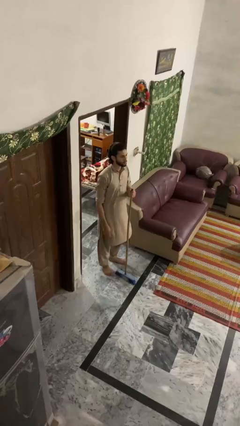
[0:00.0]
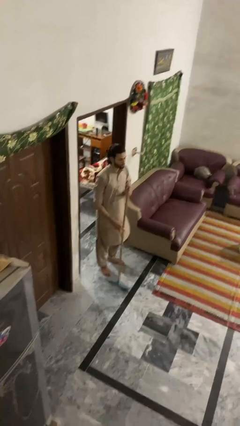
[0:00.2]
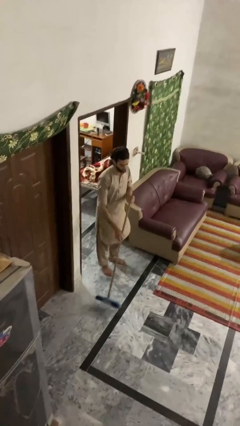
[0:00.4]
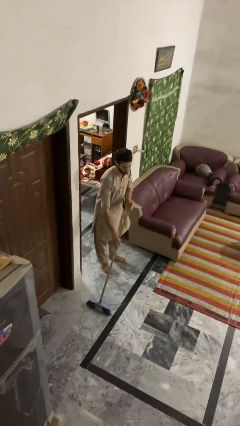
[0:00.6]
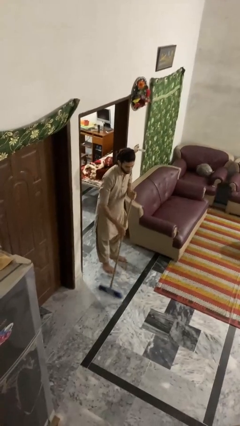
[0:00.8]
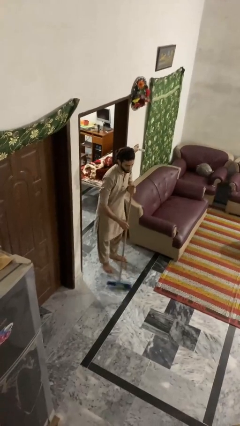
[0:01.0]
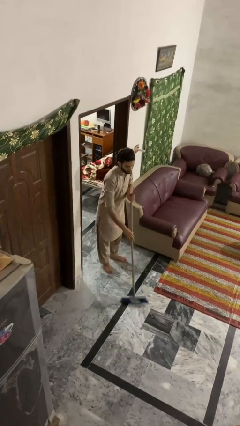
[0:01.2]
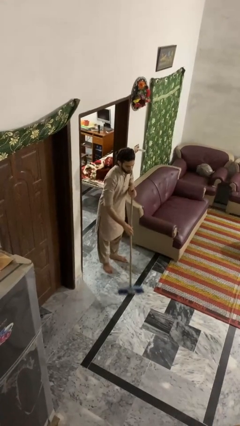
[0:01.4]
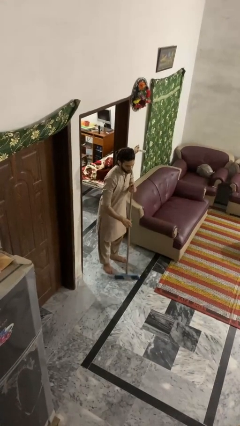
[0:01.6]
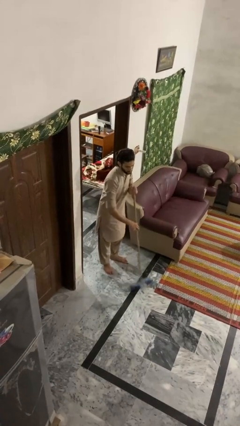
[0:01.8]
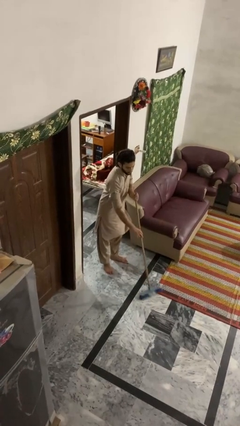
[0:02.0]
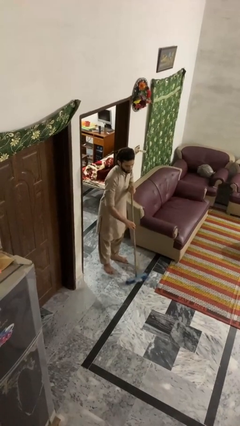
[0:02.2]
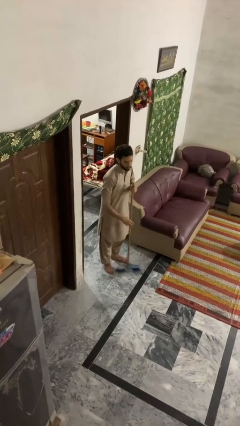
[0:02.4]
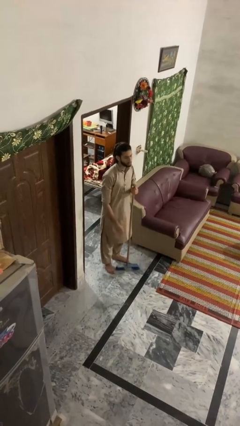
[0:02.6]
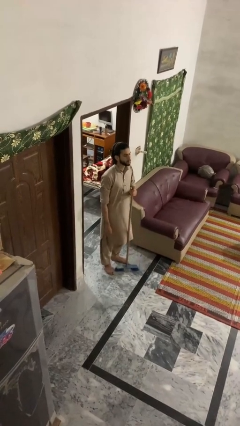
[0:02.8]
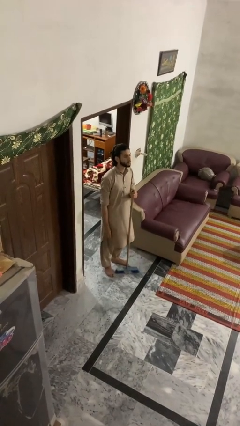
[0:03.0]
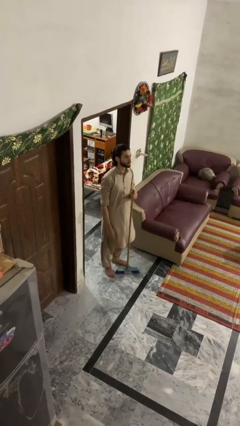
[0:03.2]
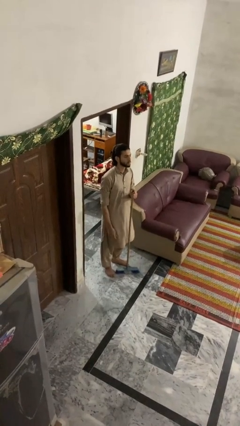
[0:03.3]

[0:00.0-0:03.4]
person sweeps floor

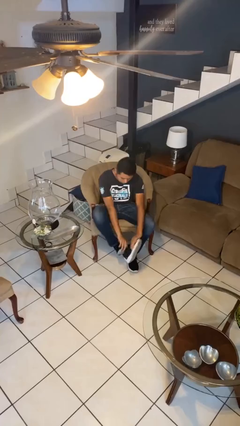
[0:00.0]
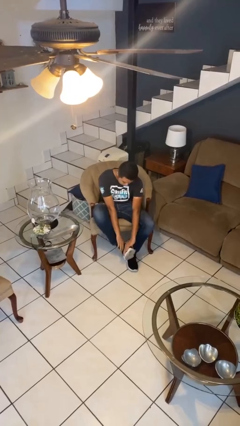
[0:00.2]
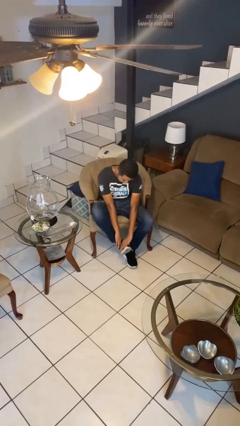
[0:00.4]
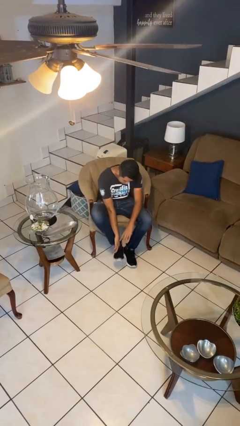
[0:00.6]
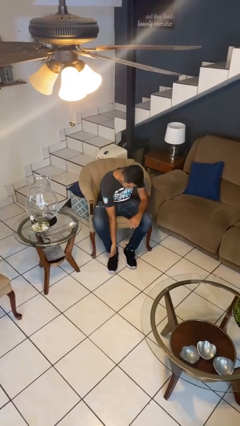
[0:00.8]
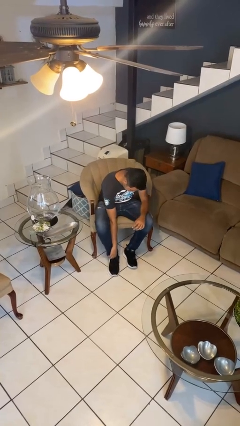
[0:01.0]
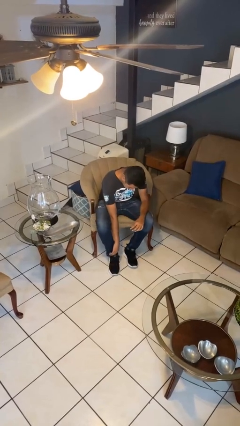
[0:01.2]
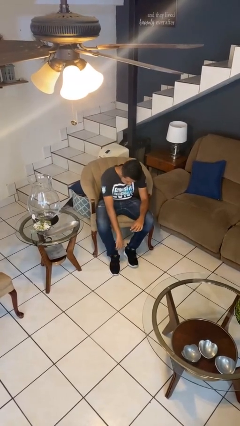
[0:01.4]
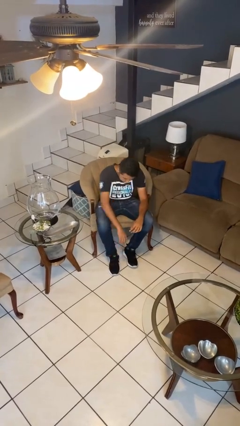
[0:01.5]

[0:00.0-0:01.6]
person puts on headphones

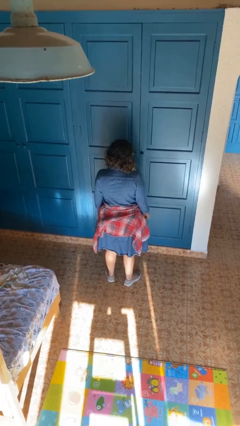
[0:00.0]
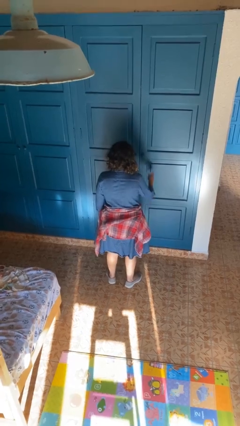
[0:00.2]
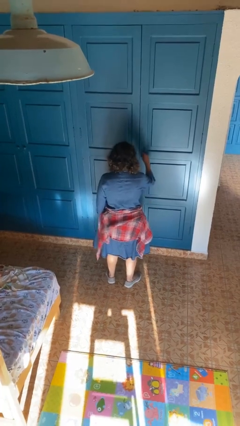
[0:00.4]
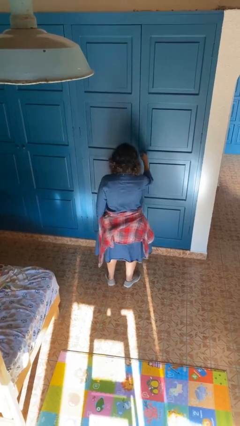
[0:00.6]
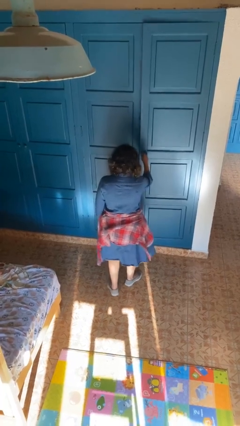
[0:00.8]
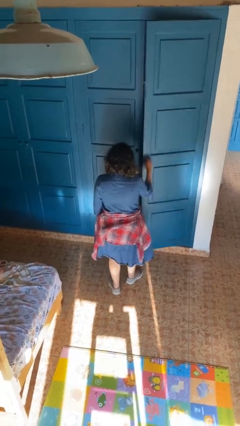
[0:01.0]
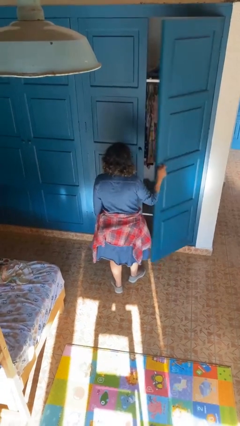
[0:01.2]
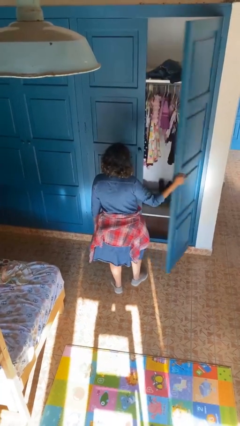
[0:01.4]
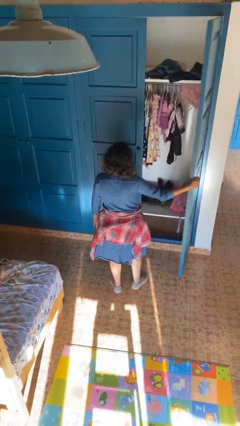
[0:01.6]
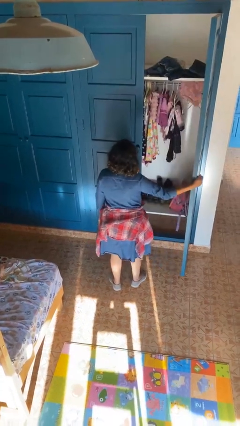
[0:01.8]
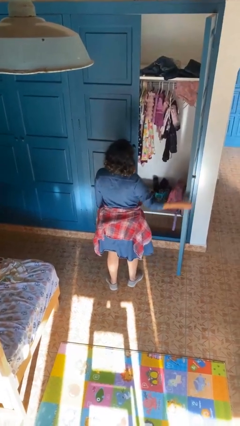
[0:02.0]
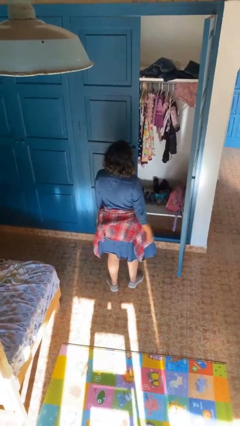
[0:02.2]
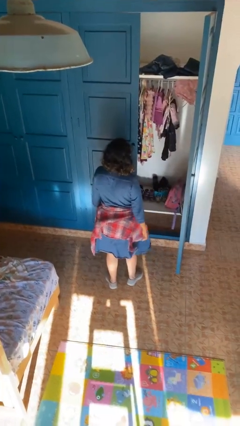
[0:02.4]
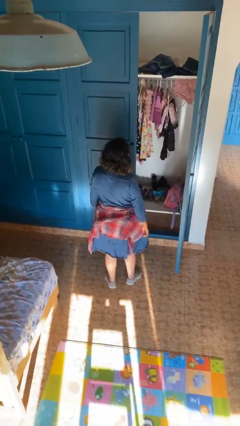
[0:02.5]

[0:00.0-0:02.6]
person opens closet door

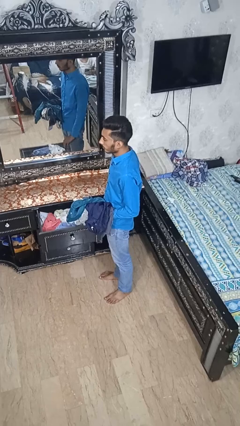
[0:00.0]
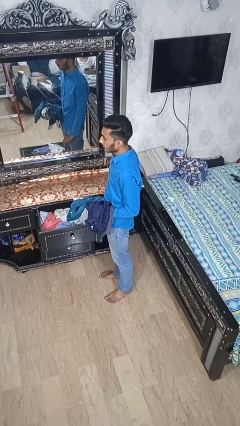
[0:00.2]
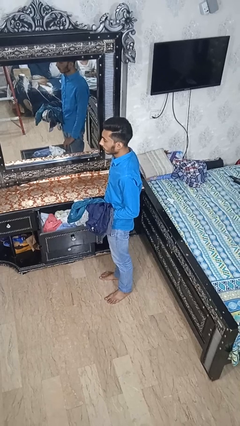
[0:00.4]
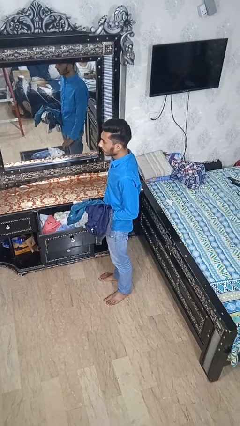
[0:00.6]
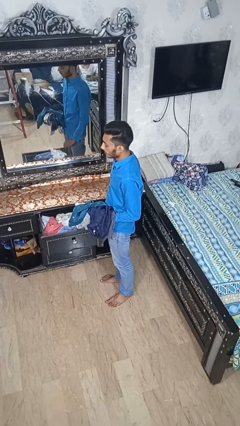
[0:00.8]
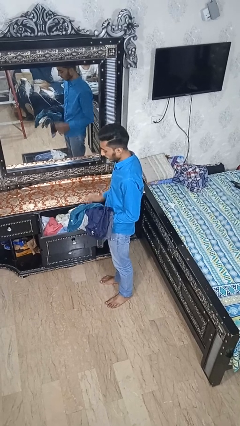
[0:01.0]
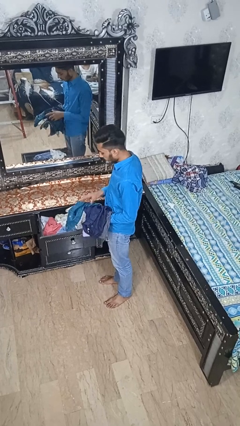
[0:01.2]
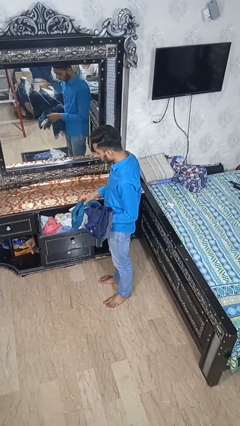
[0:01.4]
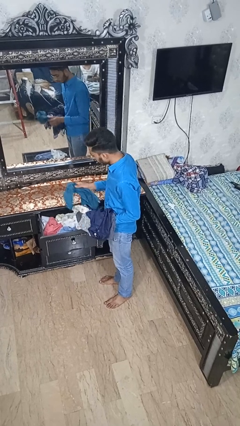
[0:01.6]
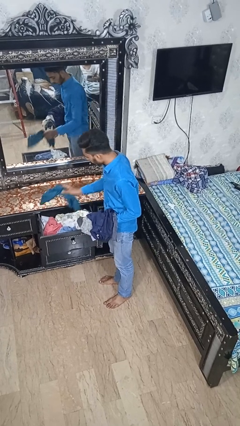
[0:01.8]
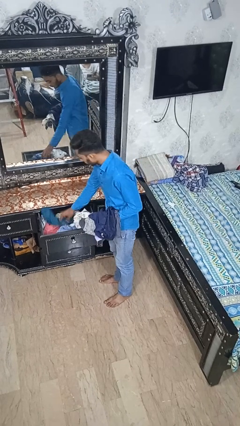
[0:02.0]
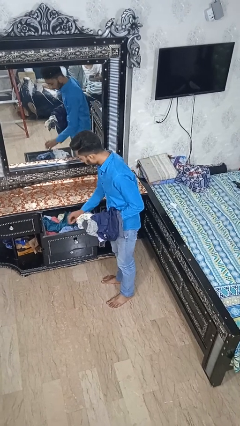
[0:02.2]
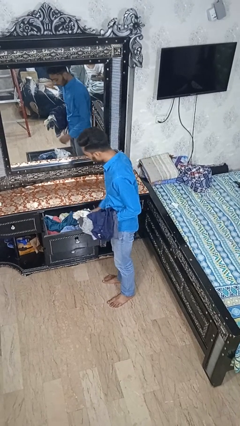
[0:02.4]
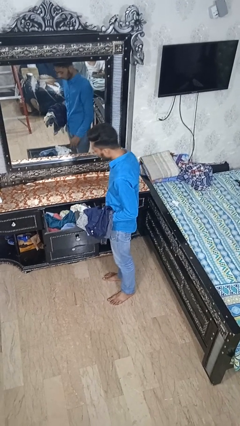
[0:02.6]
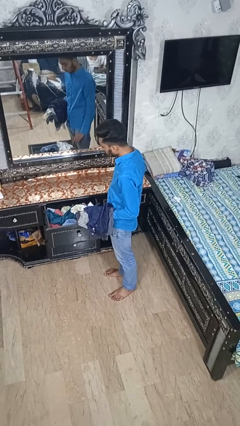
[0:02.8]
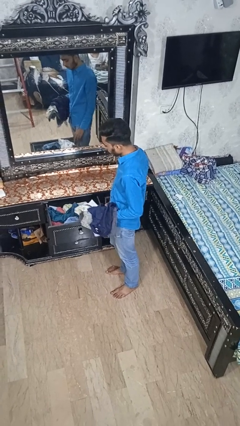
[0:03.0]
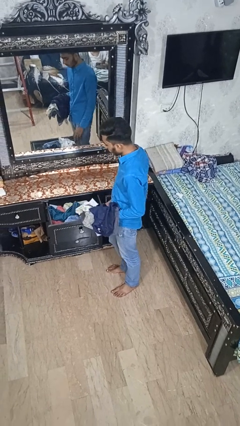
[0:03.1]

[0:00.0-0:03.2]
person puts clothes into dresser

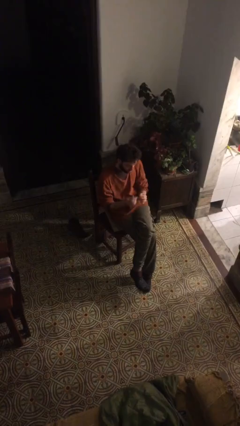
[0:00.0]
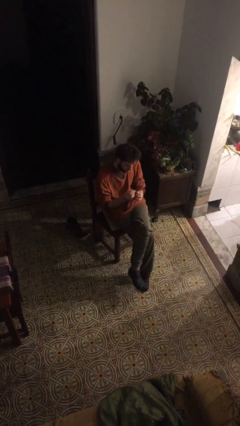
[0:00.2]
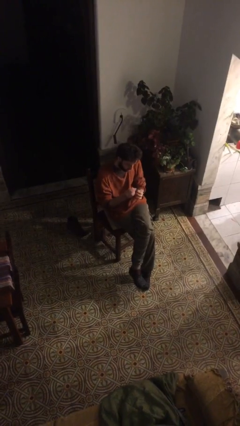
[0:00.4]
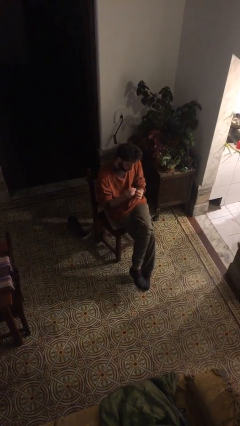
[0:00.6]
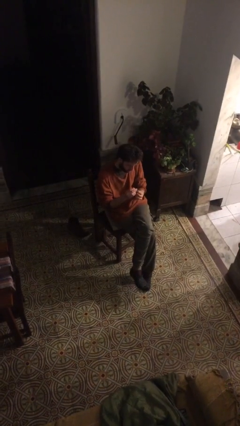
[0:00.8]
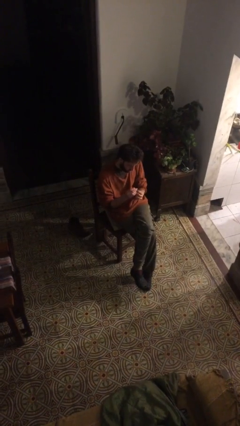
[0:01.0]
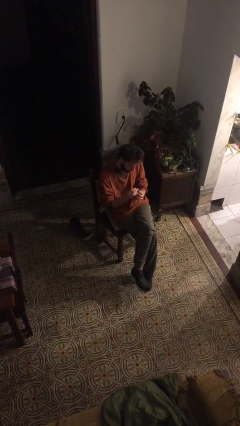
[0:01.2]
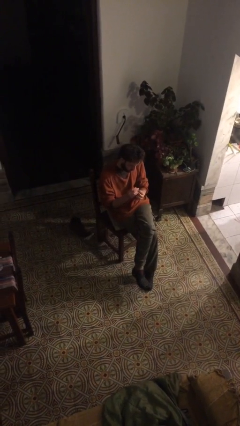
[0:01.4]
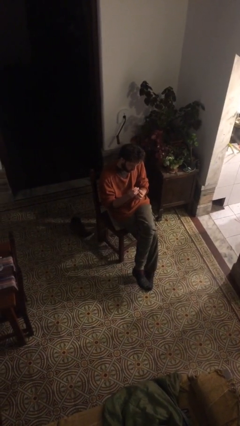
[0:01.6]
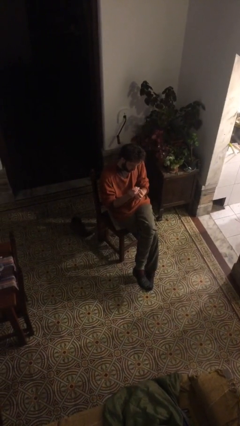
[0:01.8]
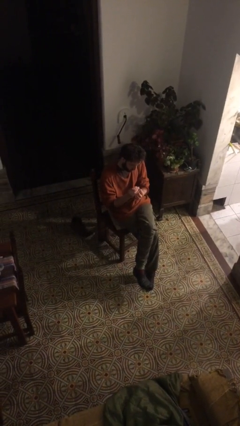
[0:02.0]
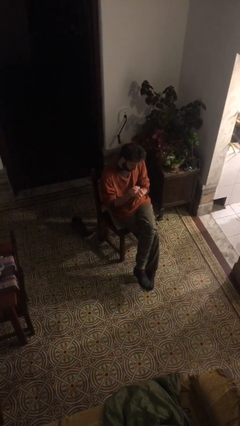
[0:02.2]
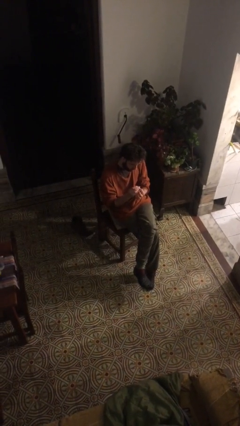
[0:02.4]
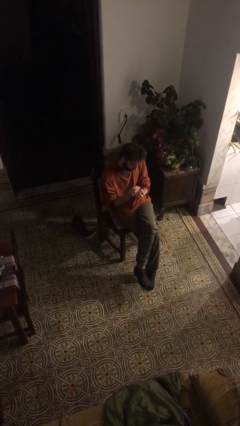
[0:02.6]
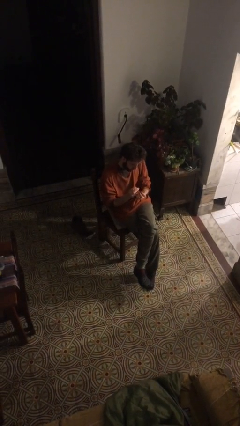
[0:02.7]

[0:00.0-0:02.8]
person clips fingernails

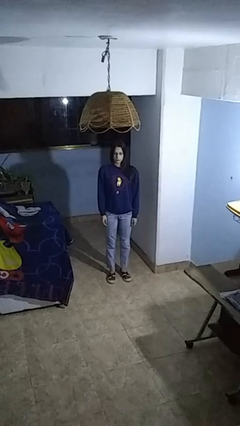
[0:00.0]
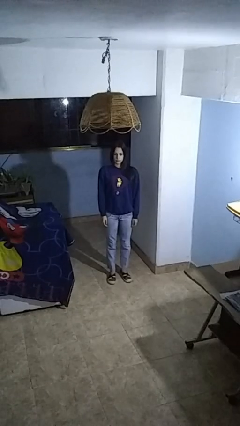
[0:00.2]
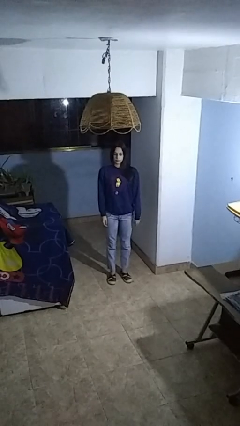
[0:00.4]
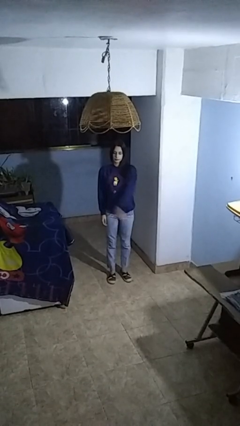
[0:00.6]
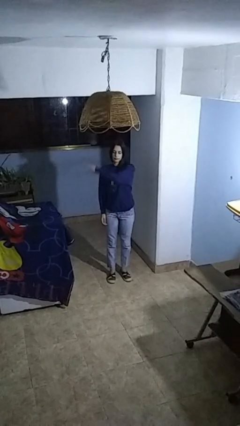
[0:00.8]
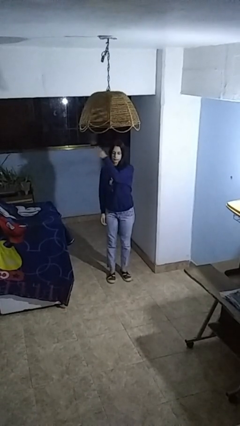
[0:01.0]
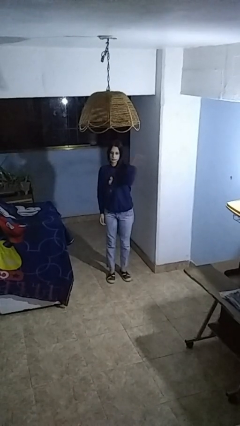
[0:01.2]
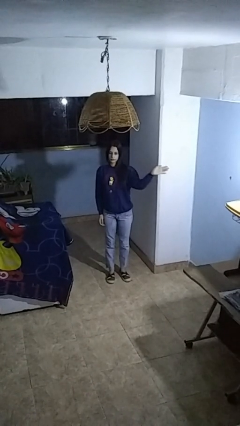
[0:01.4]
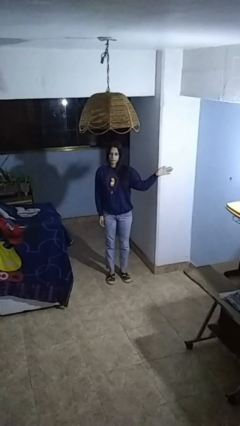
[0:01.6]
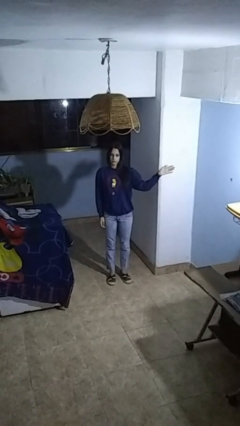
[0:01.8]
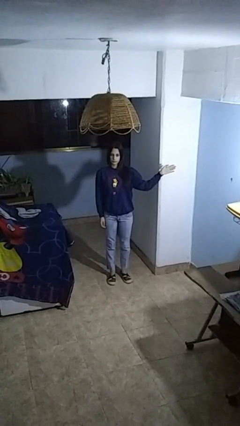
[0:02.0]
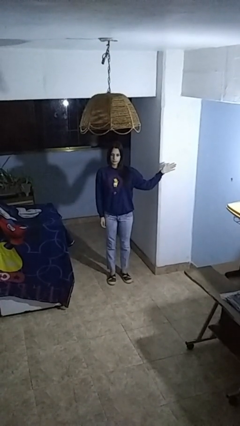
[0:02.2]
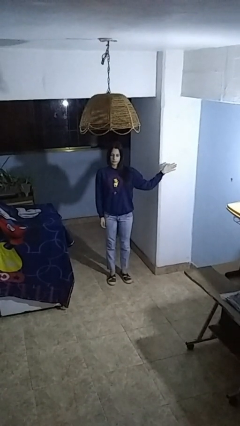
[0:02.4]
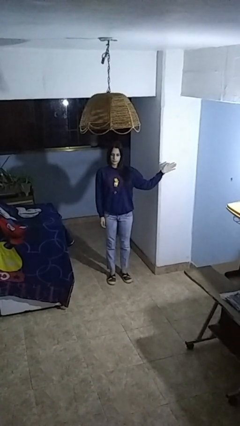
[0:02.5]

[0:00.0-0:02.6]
person gestures swipe left

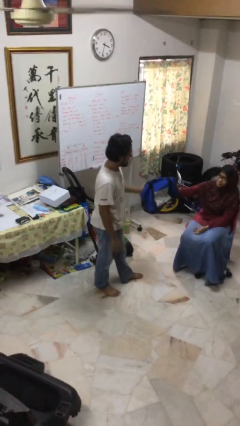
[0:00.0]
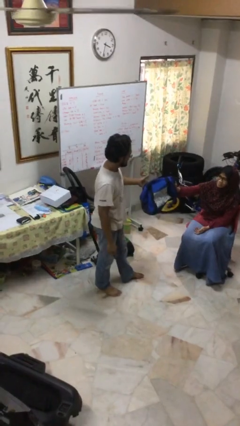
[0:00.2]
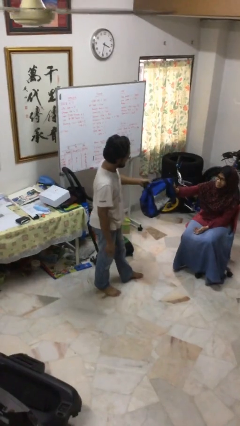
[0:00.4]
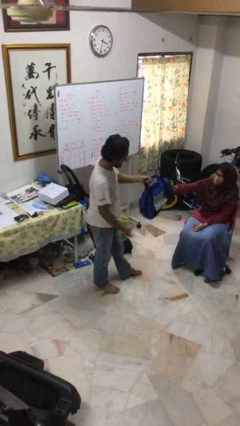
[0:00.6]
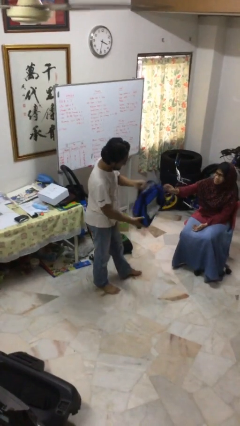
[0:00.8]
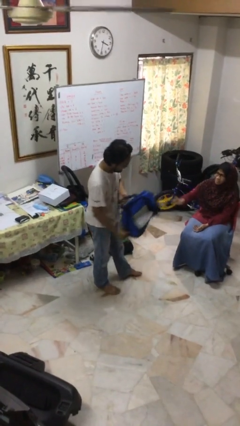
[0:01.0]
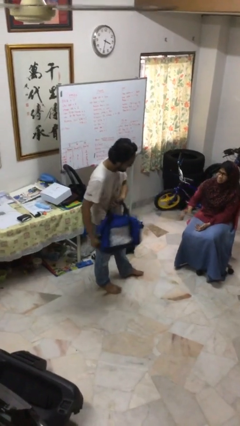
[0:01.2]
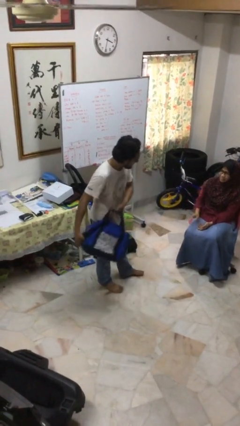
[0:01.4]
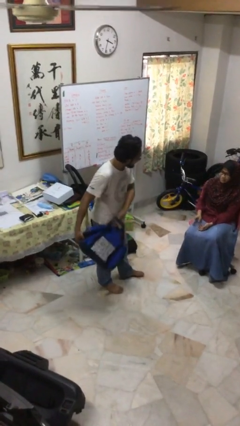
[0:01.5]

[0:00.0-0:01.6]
person transfers object to person
